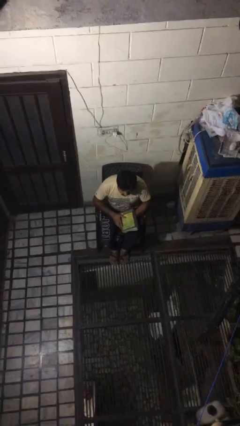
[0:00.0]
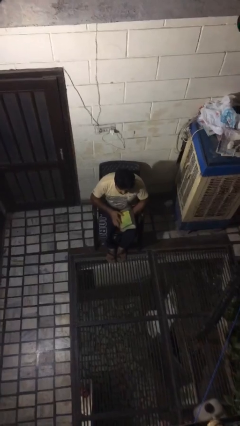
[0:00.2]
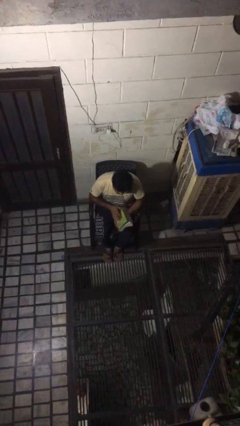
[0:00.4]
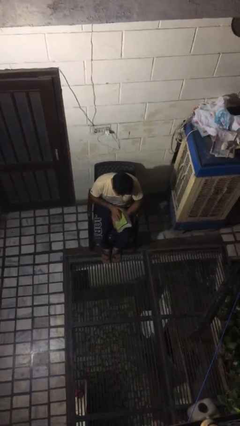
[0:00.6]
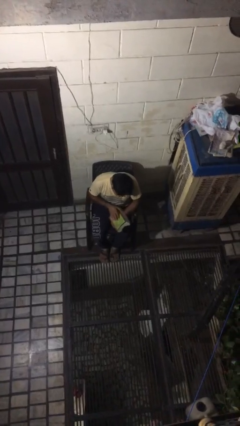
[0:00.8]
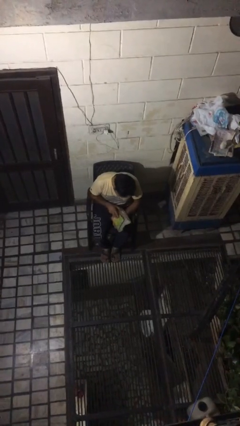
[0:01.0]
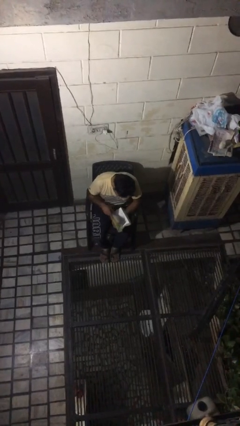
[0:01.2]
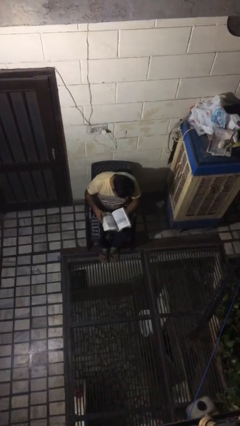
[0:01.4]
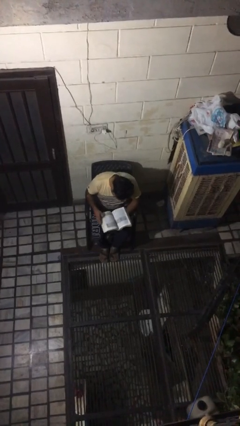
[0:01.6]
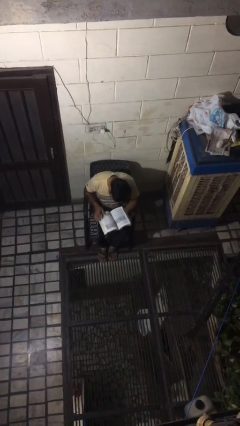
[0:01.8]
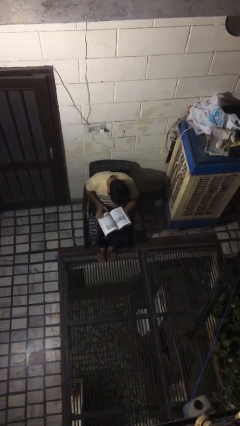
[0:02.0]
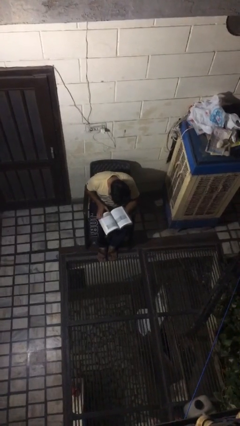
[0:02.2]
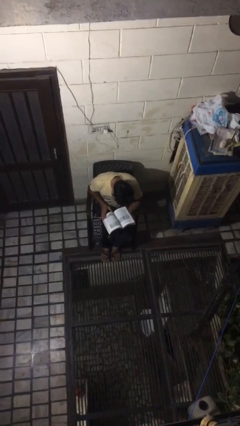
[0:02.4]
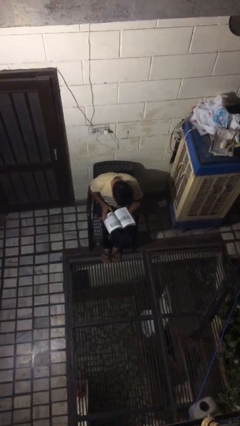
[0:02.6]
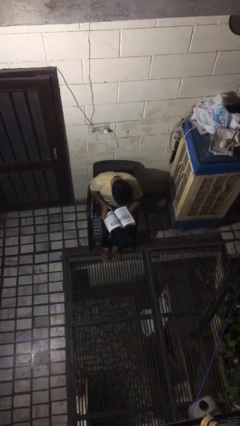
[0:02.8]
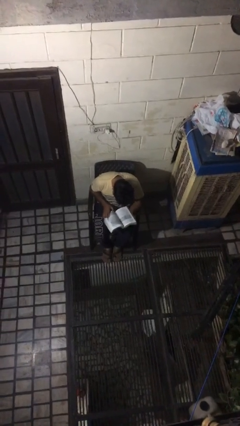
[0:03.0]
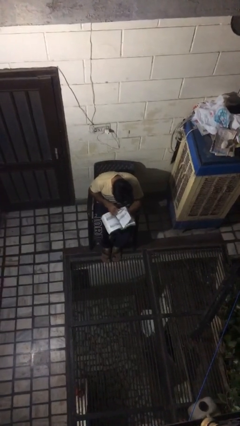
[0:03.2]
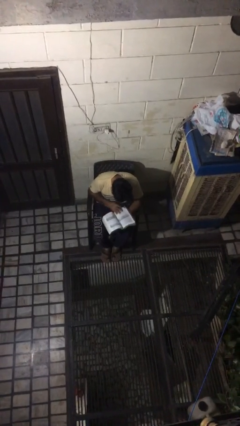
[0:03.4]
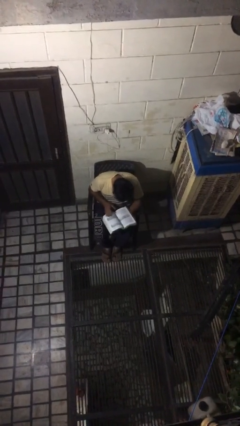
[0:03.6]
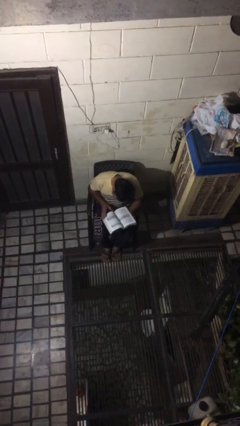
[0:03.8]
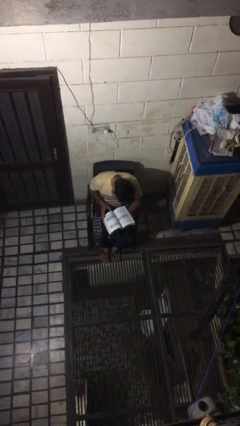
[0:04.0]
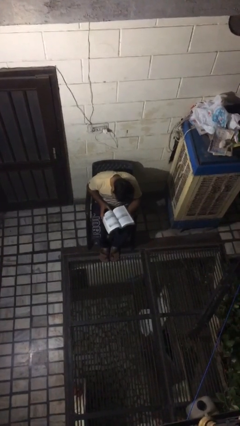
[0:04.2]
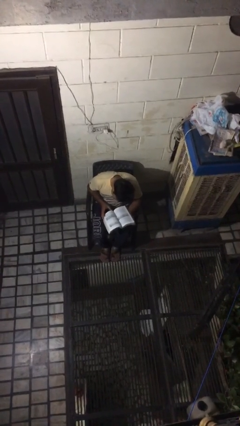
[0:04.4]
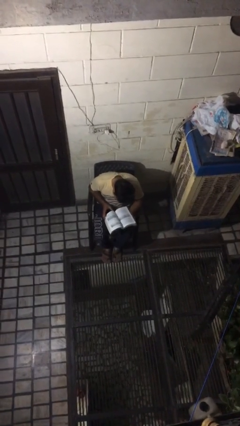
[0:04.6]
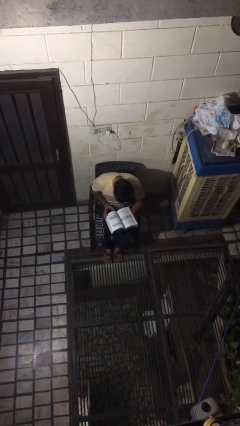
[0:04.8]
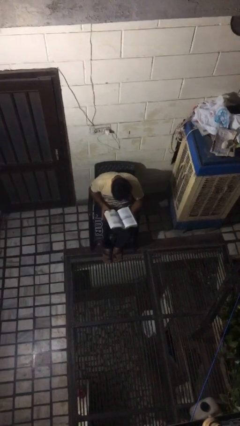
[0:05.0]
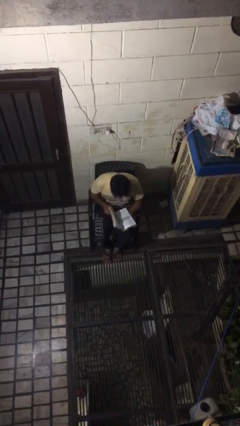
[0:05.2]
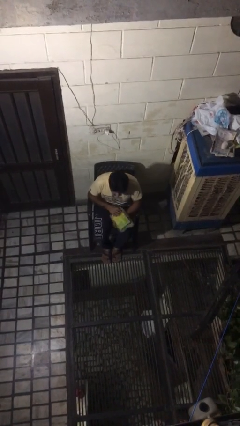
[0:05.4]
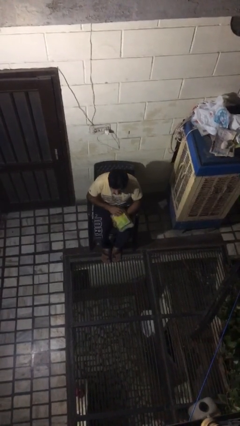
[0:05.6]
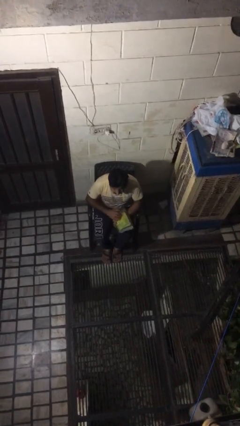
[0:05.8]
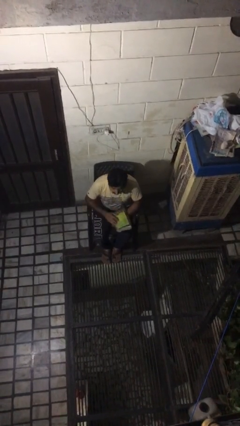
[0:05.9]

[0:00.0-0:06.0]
person reads book

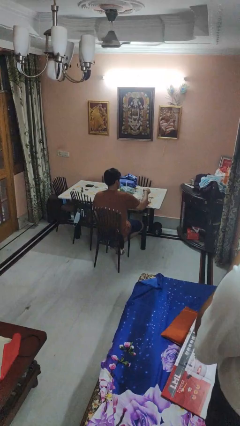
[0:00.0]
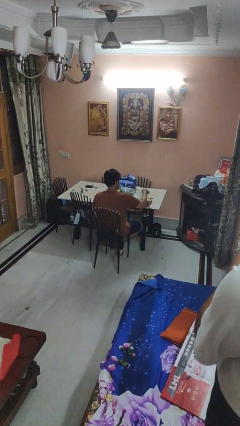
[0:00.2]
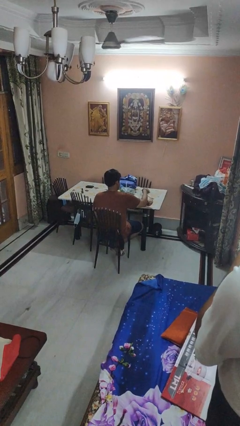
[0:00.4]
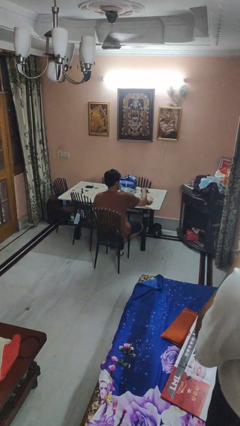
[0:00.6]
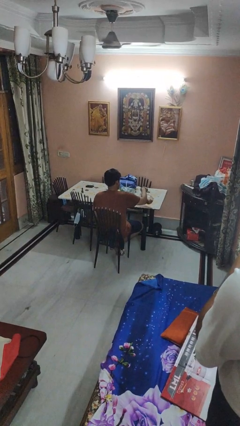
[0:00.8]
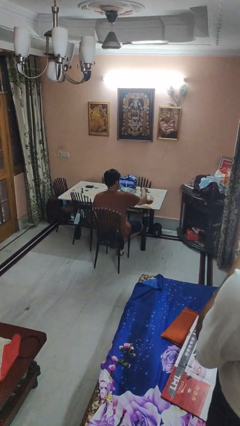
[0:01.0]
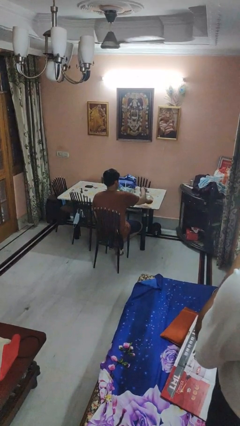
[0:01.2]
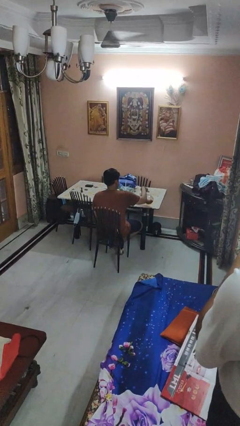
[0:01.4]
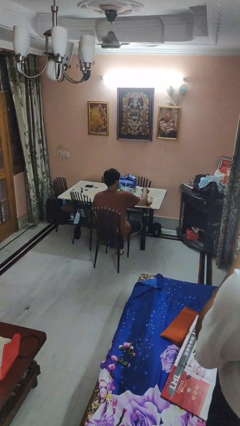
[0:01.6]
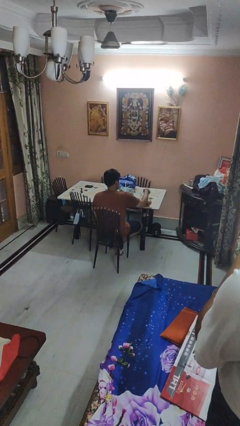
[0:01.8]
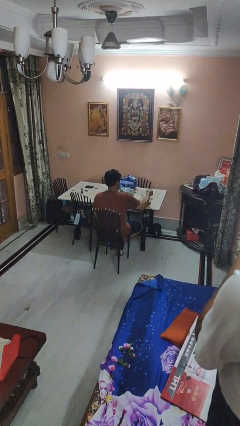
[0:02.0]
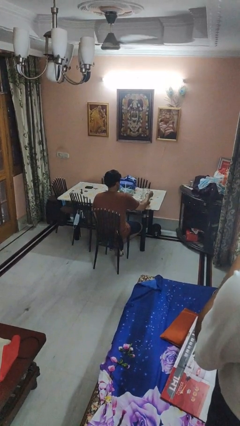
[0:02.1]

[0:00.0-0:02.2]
person pours coffee into mug

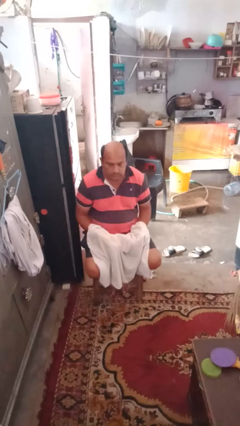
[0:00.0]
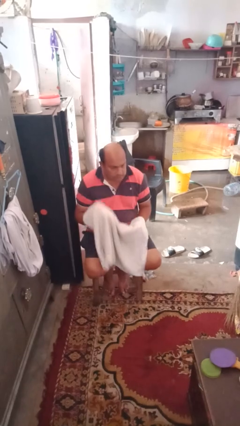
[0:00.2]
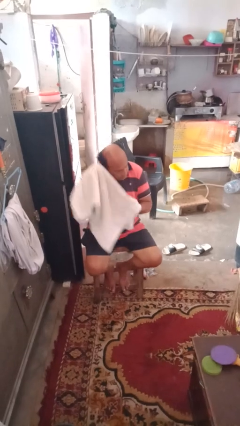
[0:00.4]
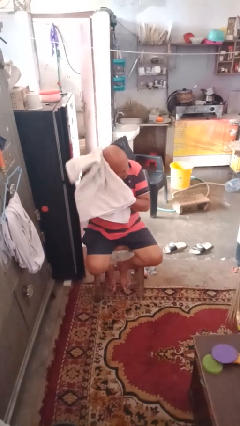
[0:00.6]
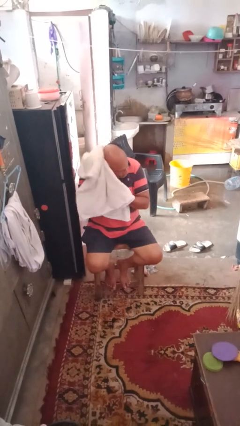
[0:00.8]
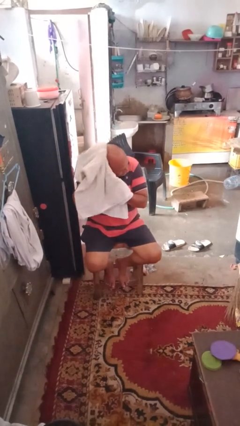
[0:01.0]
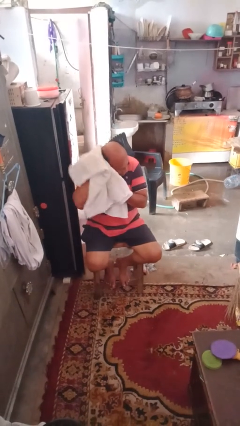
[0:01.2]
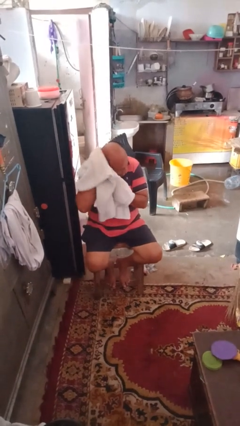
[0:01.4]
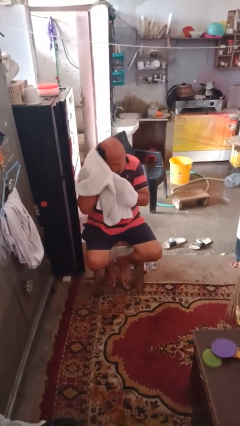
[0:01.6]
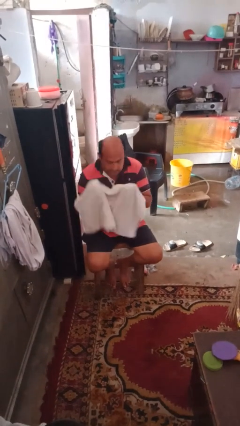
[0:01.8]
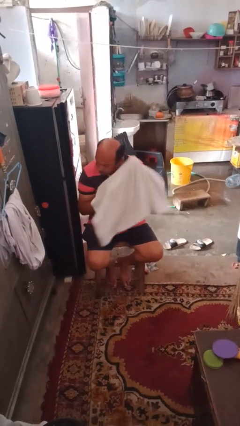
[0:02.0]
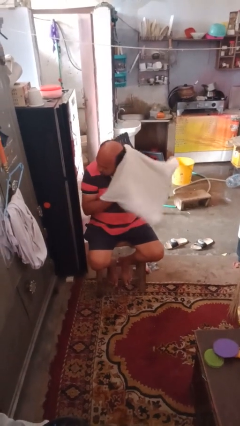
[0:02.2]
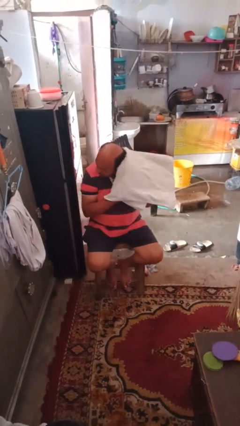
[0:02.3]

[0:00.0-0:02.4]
person dries hair with towel

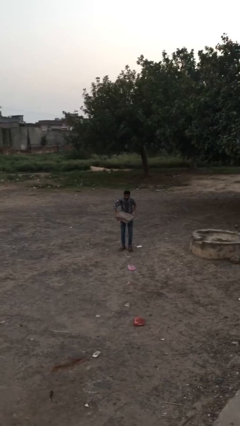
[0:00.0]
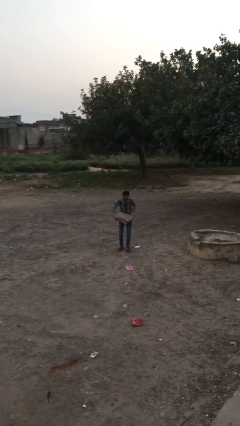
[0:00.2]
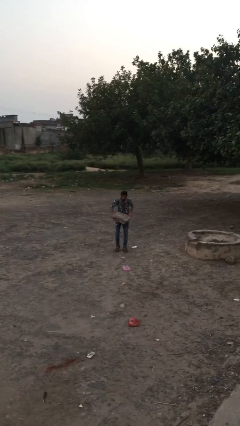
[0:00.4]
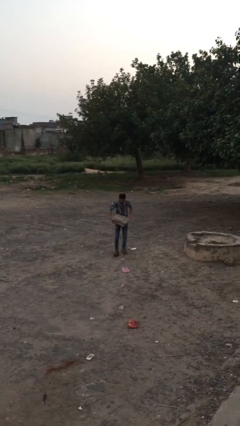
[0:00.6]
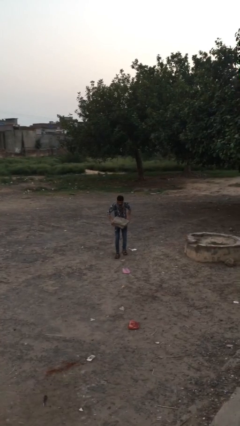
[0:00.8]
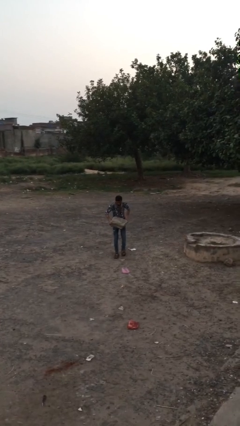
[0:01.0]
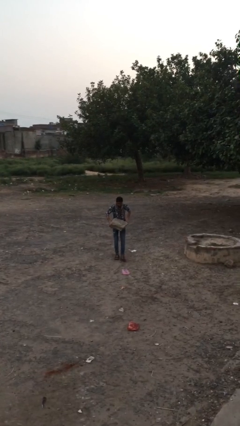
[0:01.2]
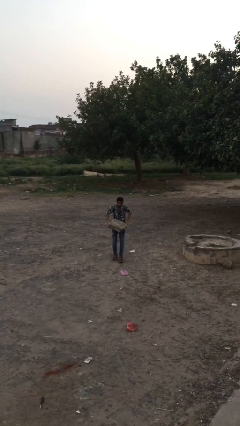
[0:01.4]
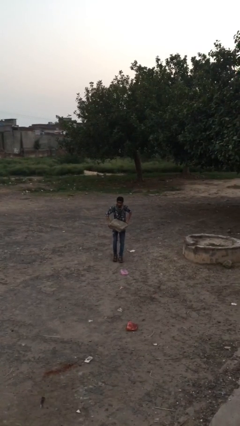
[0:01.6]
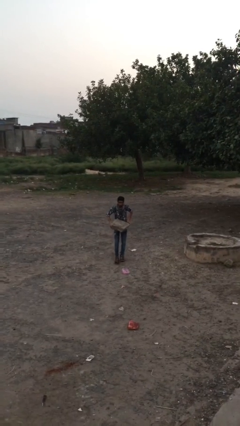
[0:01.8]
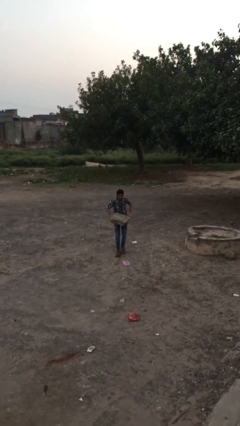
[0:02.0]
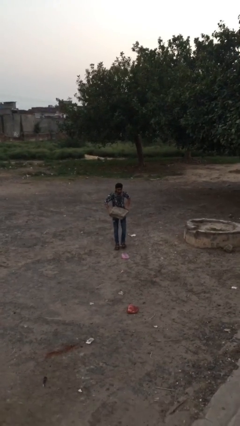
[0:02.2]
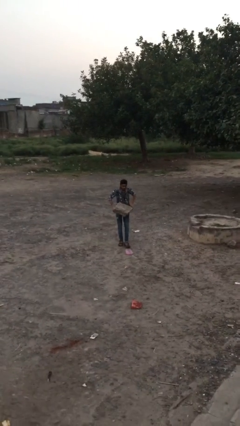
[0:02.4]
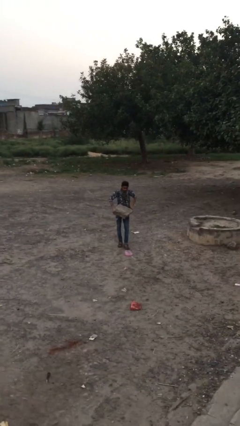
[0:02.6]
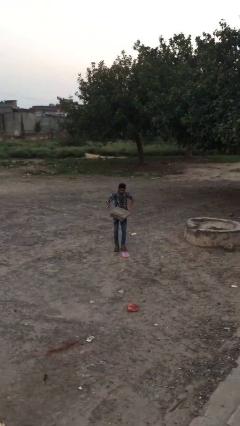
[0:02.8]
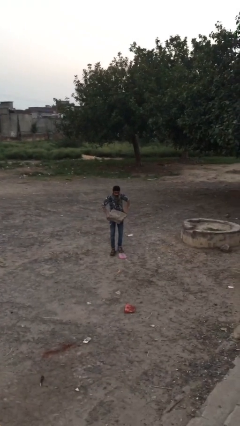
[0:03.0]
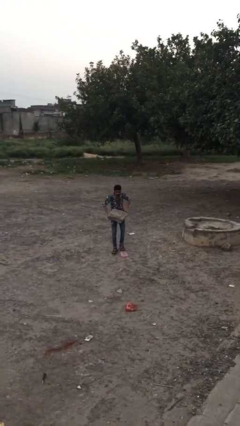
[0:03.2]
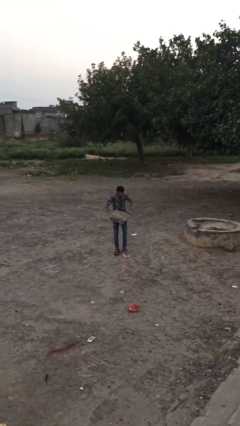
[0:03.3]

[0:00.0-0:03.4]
person carries heavy object

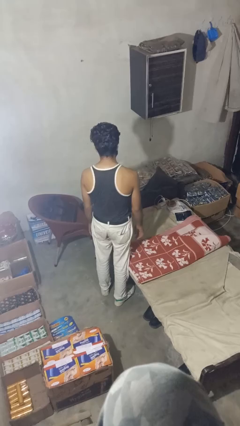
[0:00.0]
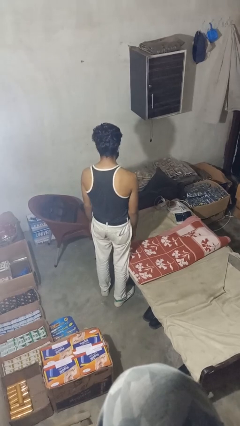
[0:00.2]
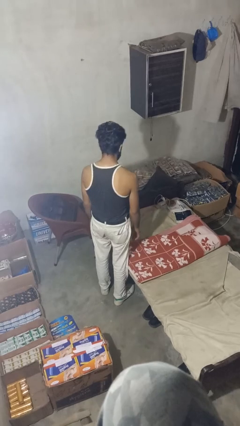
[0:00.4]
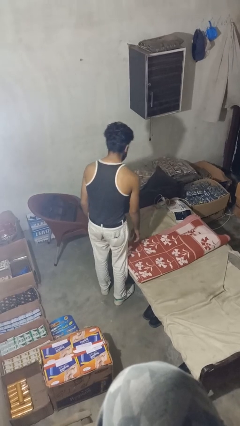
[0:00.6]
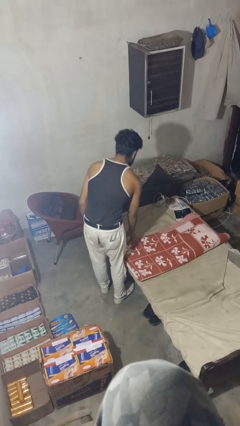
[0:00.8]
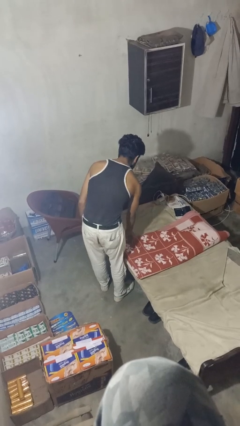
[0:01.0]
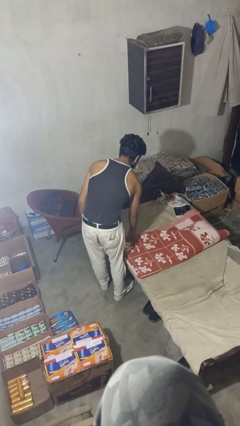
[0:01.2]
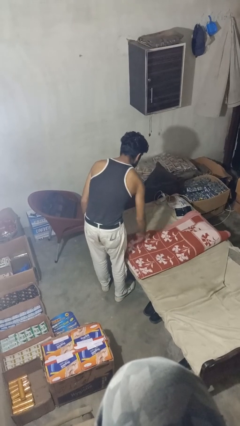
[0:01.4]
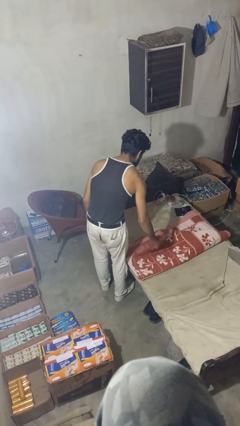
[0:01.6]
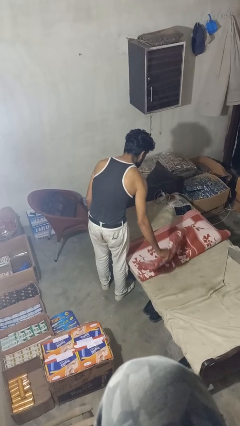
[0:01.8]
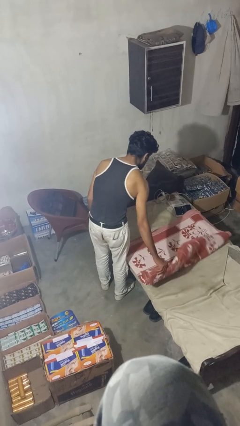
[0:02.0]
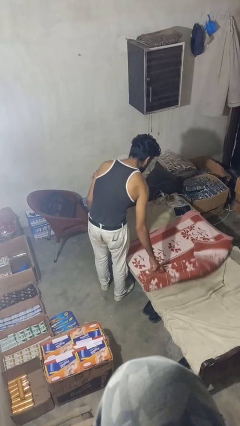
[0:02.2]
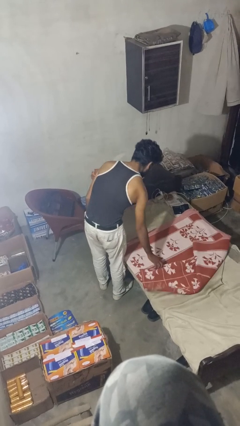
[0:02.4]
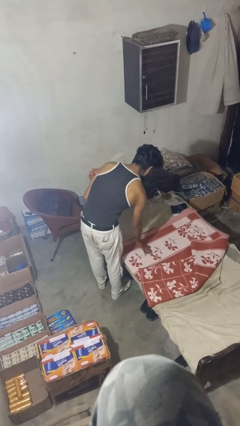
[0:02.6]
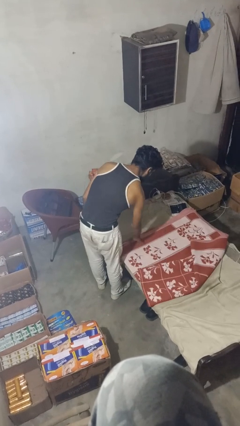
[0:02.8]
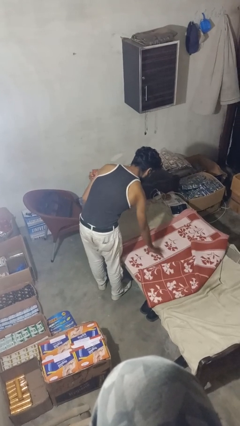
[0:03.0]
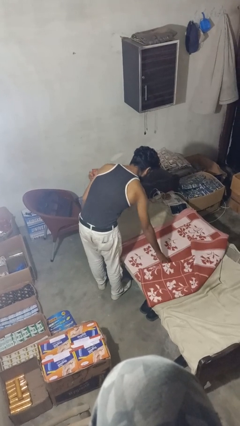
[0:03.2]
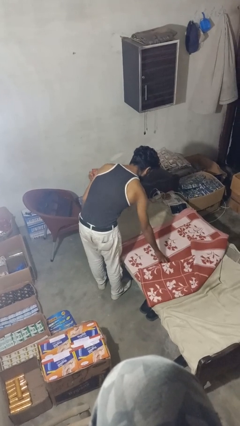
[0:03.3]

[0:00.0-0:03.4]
person makes bed

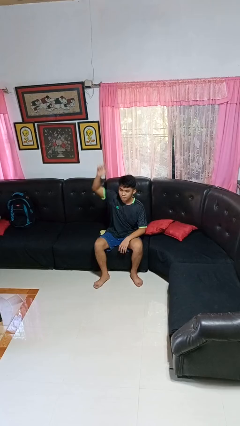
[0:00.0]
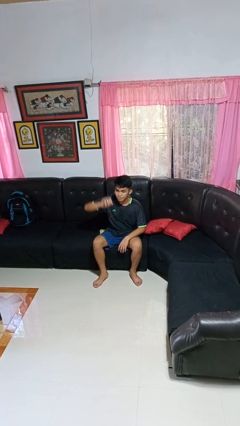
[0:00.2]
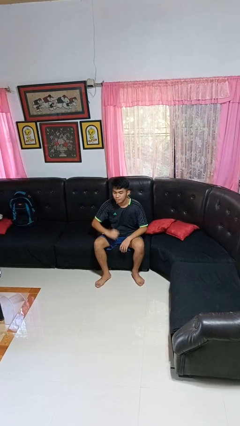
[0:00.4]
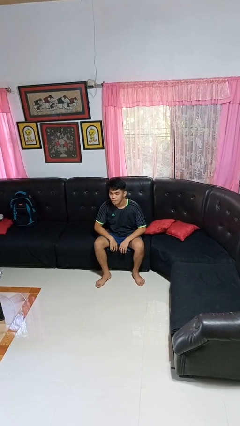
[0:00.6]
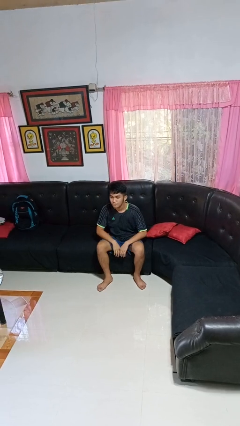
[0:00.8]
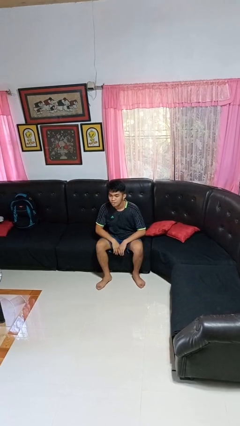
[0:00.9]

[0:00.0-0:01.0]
person gestures lower hand
